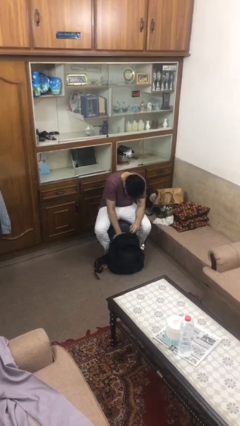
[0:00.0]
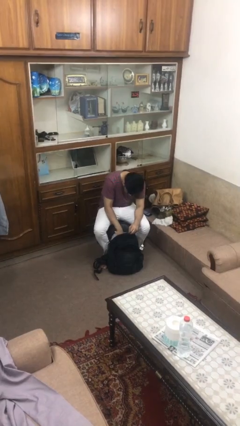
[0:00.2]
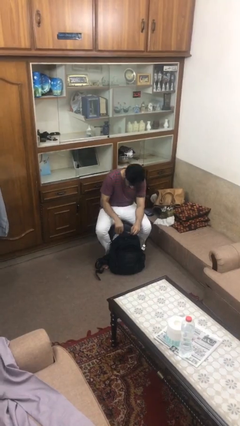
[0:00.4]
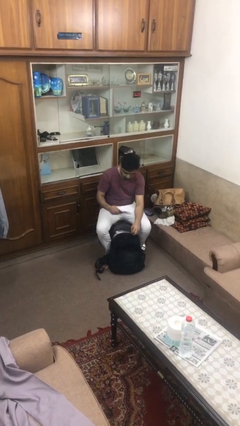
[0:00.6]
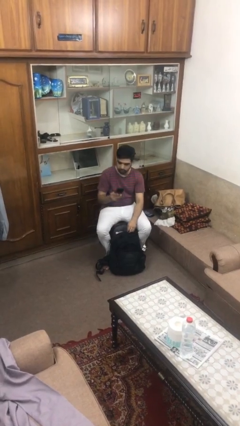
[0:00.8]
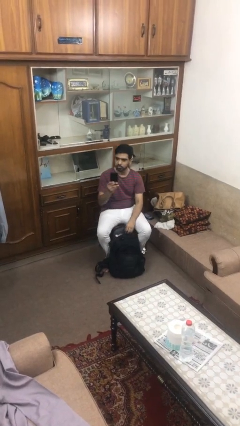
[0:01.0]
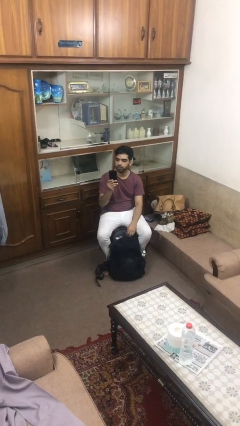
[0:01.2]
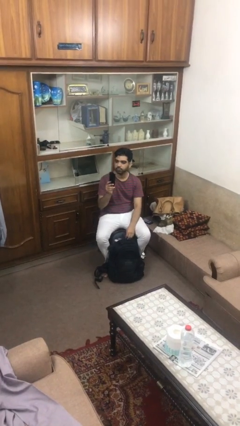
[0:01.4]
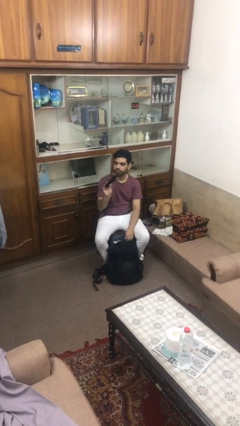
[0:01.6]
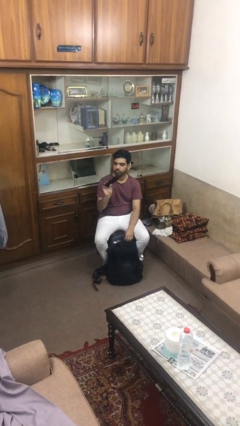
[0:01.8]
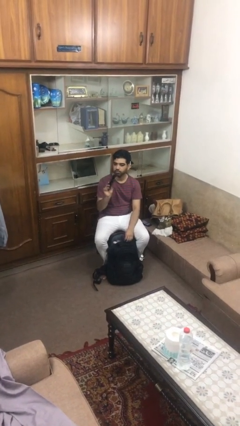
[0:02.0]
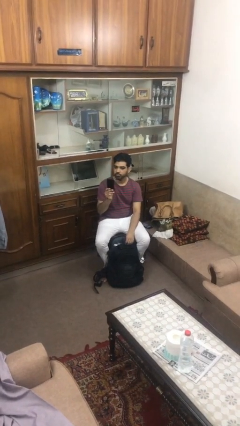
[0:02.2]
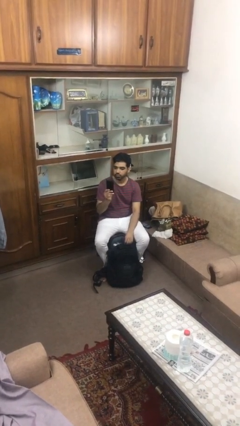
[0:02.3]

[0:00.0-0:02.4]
person takes object from backpack

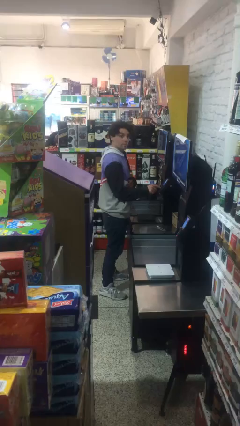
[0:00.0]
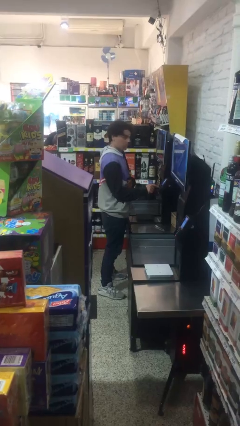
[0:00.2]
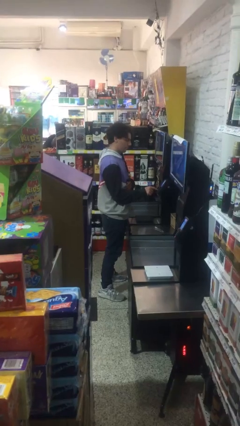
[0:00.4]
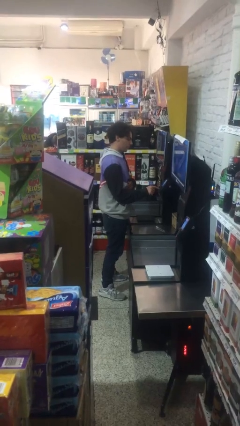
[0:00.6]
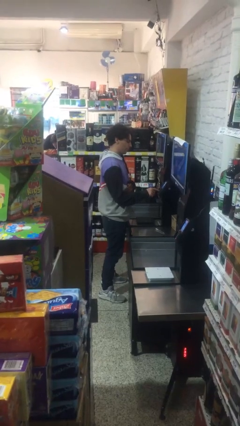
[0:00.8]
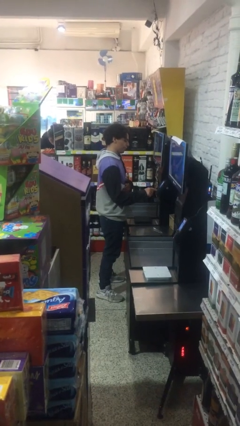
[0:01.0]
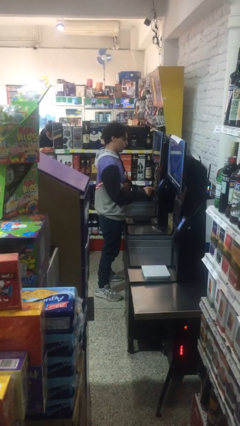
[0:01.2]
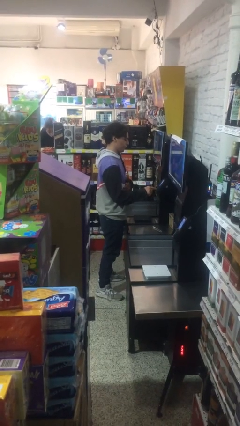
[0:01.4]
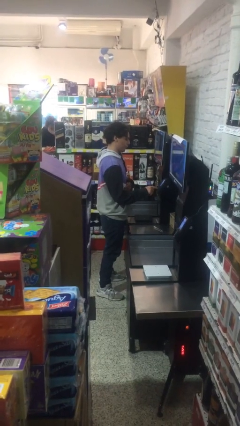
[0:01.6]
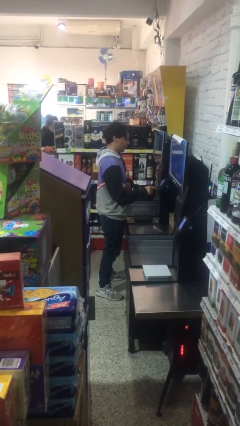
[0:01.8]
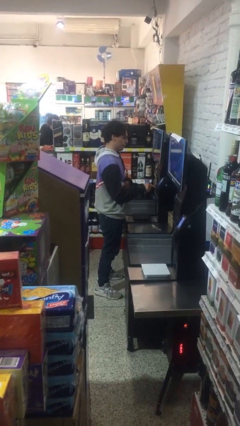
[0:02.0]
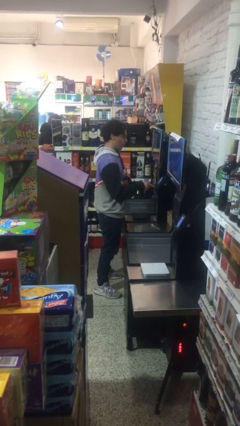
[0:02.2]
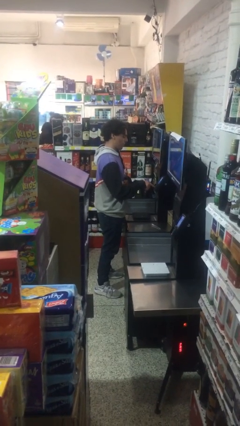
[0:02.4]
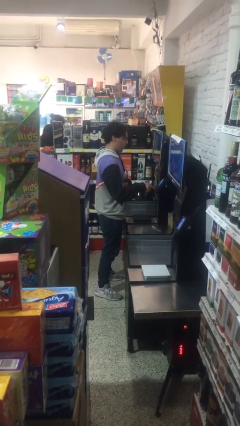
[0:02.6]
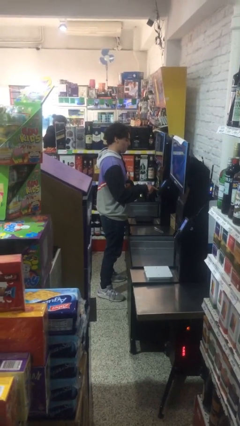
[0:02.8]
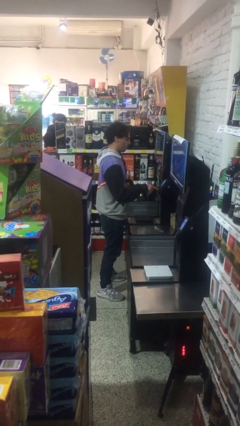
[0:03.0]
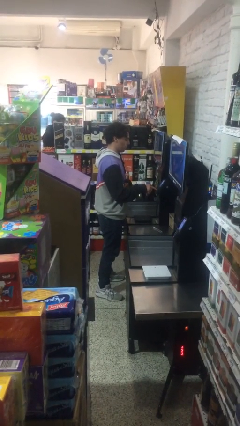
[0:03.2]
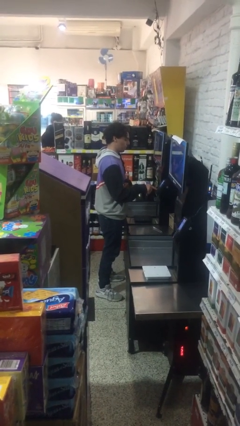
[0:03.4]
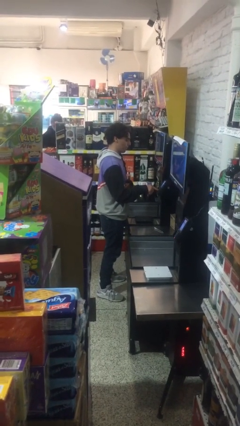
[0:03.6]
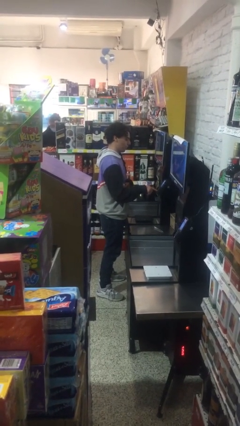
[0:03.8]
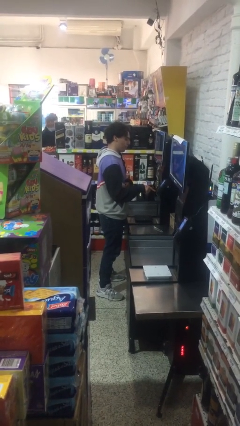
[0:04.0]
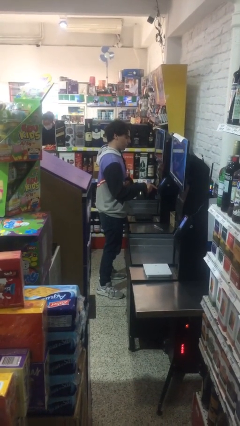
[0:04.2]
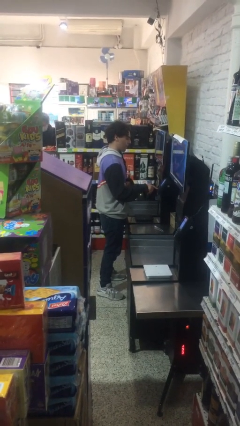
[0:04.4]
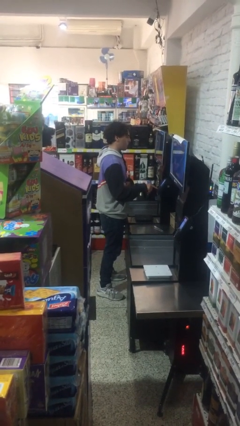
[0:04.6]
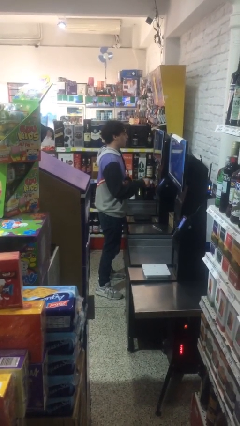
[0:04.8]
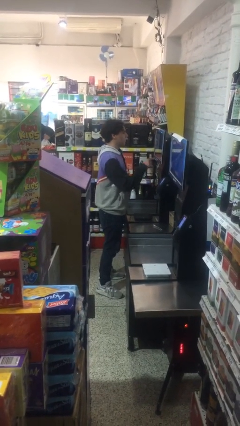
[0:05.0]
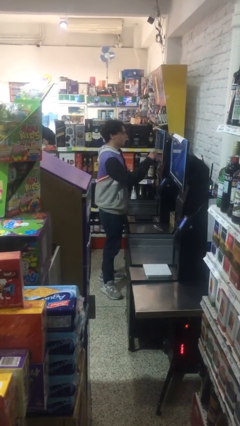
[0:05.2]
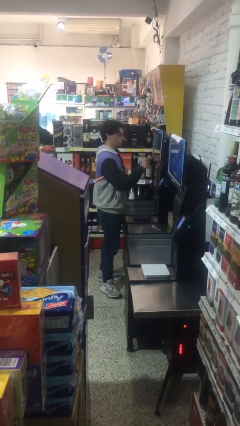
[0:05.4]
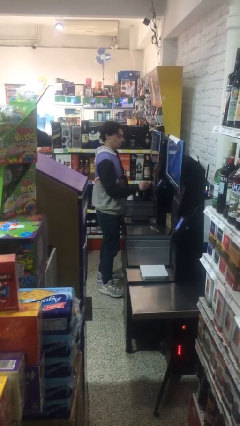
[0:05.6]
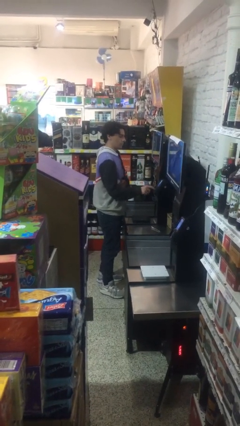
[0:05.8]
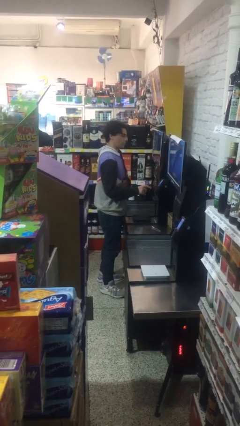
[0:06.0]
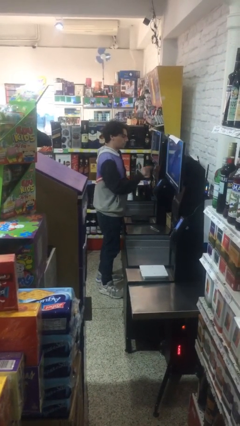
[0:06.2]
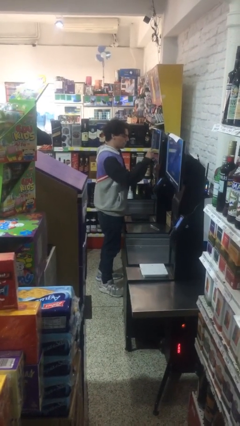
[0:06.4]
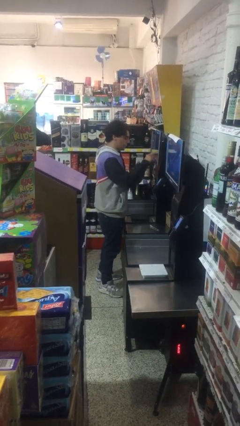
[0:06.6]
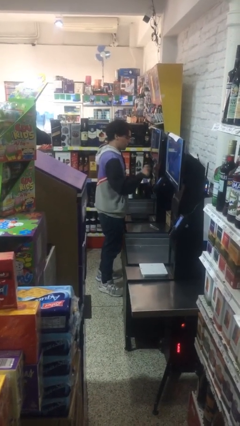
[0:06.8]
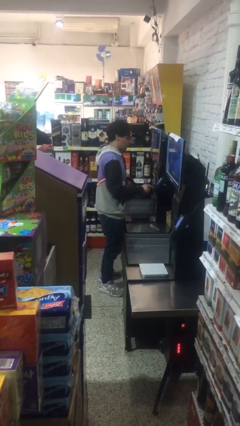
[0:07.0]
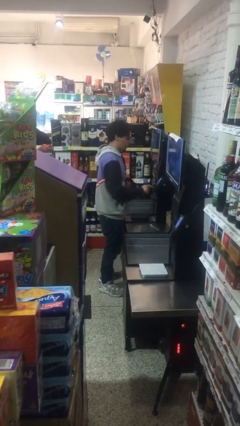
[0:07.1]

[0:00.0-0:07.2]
person purchases from machine

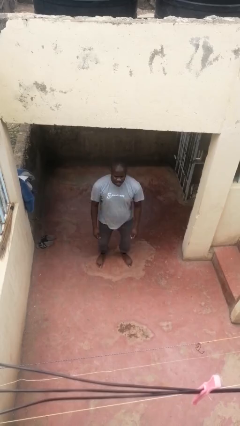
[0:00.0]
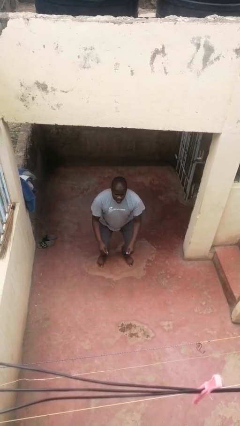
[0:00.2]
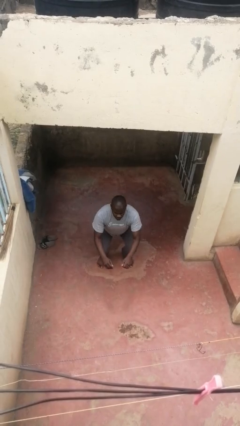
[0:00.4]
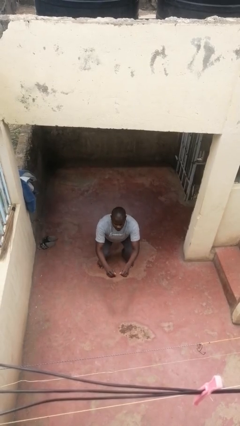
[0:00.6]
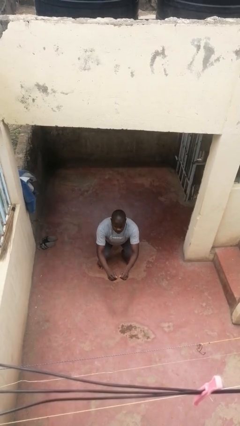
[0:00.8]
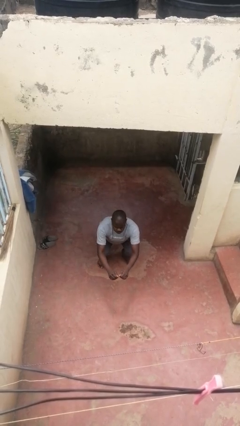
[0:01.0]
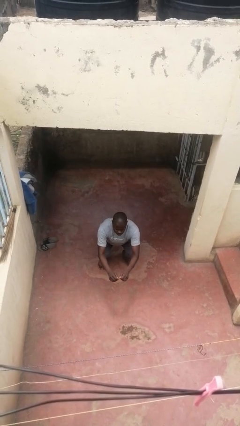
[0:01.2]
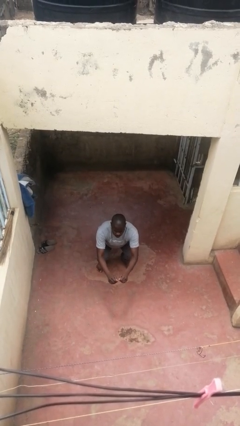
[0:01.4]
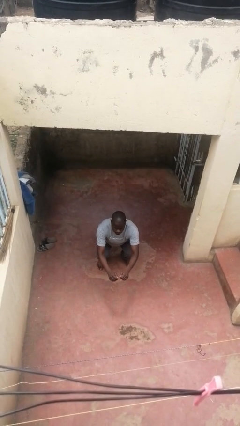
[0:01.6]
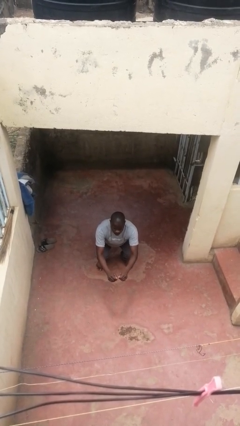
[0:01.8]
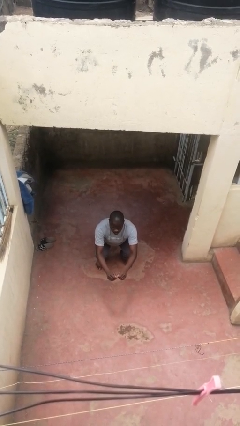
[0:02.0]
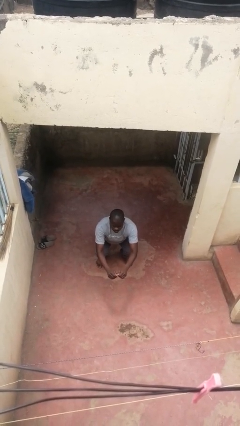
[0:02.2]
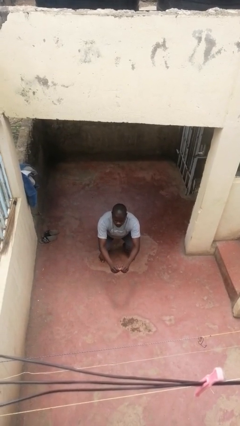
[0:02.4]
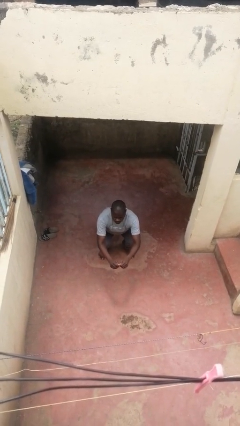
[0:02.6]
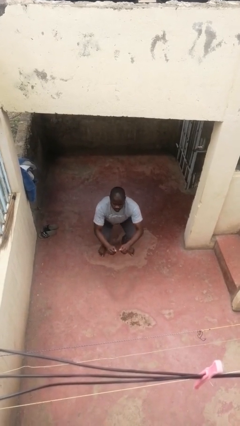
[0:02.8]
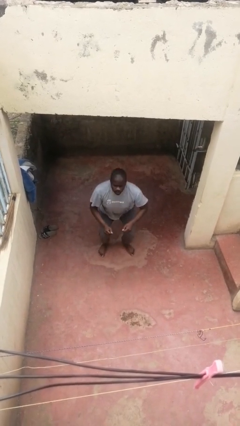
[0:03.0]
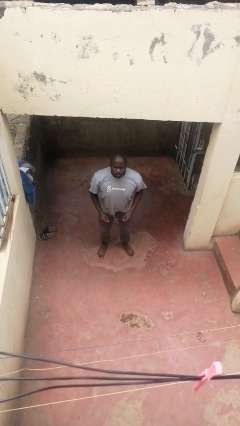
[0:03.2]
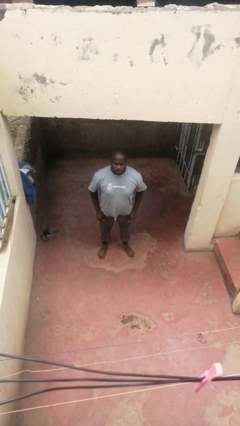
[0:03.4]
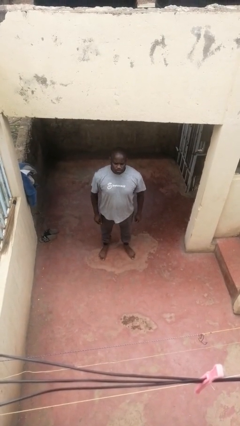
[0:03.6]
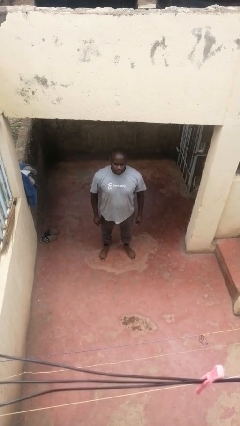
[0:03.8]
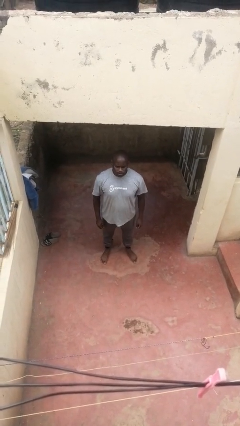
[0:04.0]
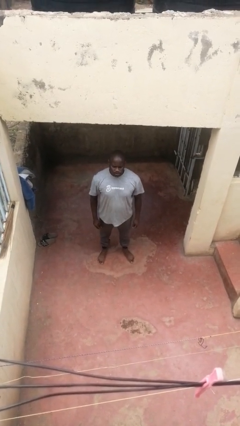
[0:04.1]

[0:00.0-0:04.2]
person squats

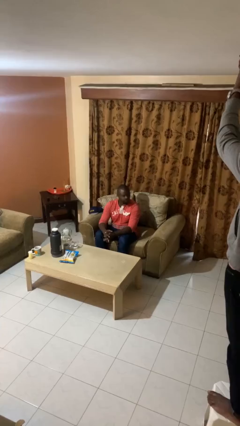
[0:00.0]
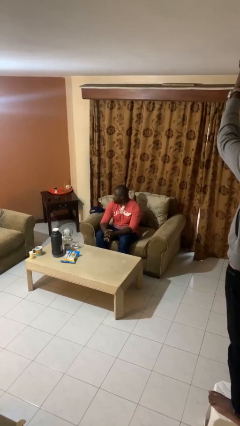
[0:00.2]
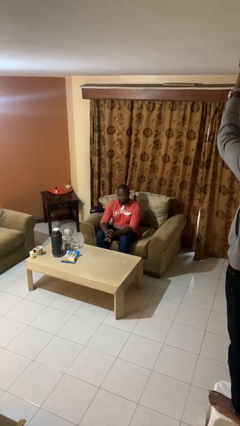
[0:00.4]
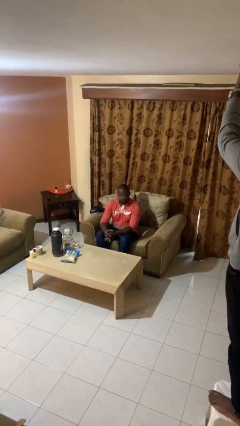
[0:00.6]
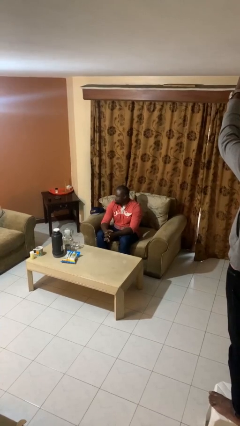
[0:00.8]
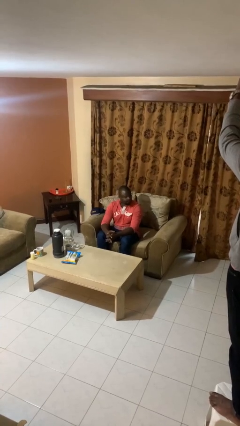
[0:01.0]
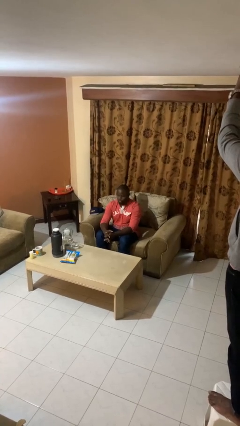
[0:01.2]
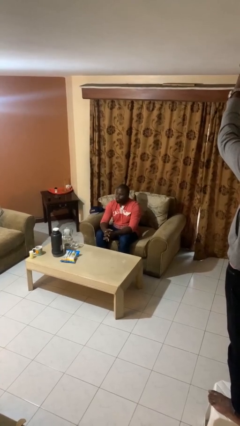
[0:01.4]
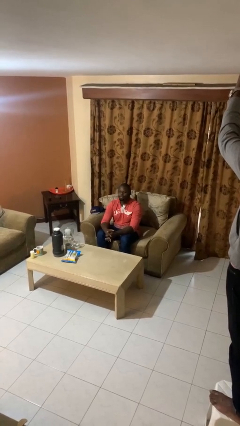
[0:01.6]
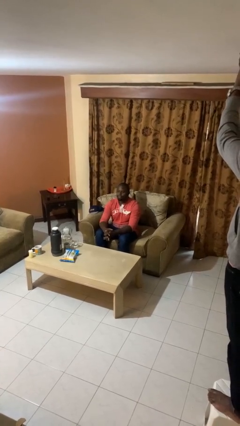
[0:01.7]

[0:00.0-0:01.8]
person shakes head

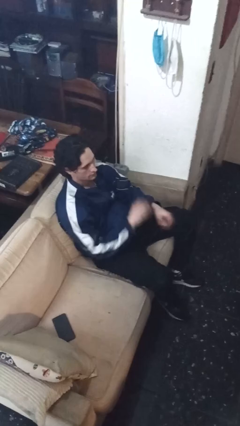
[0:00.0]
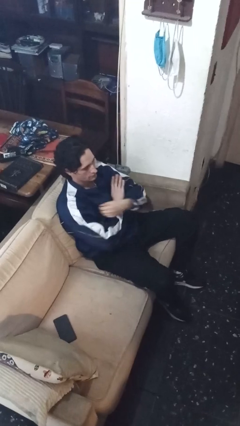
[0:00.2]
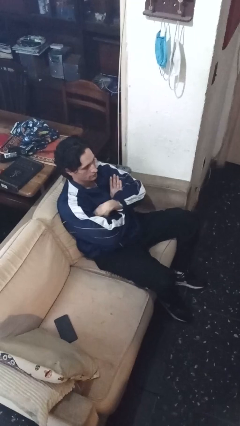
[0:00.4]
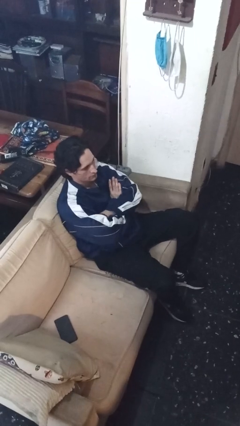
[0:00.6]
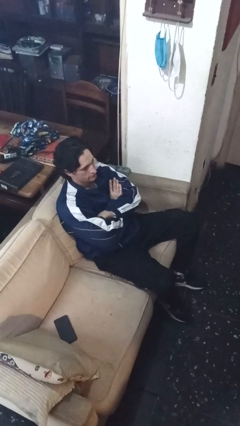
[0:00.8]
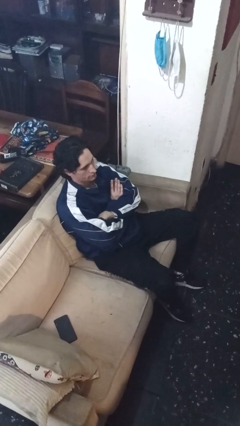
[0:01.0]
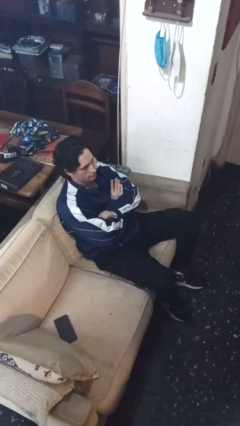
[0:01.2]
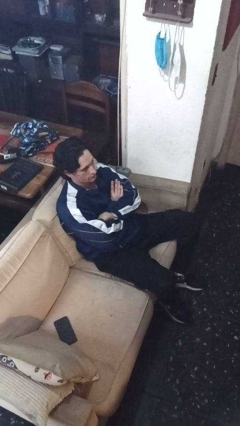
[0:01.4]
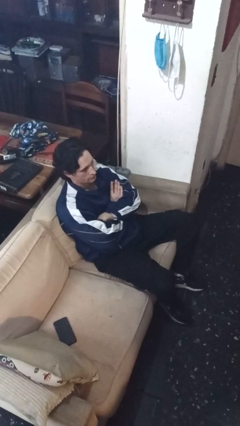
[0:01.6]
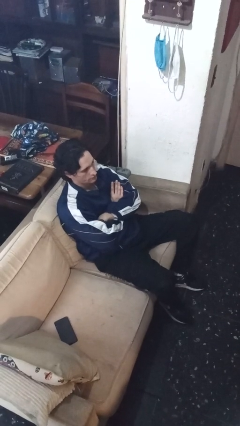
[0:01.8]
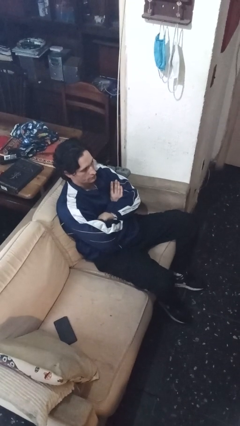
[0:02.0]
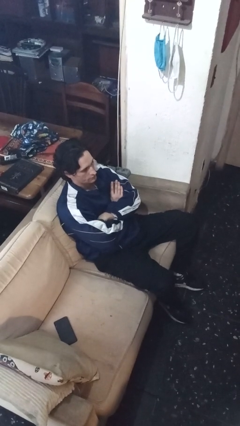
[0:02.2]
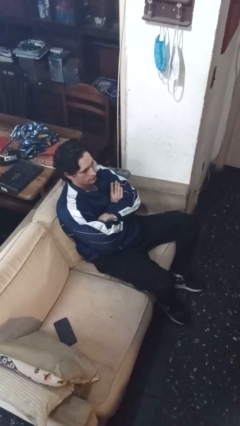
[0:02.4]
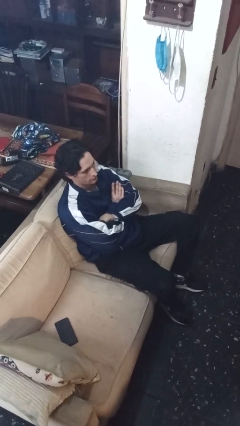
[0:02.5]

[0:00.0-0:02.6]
person crosses arms
